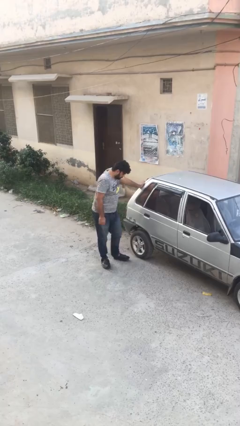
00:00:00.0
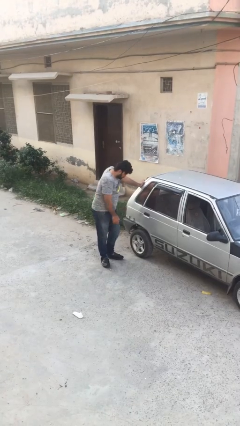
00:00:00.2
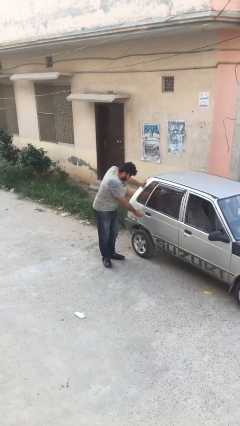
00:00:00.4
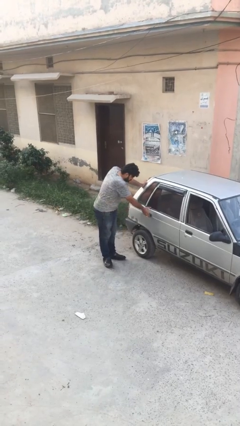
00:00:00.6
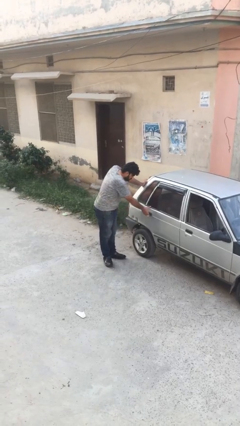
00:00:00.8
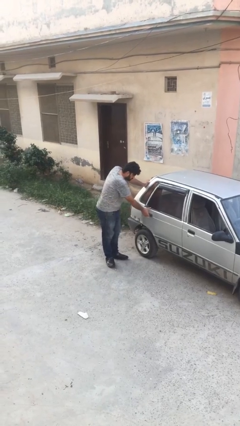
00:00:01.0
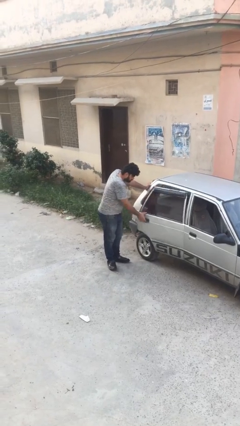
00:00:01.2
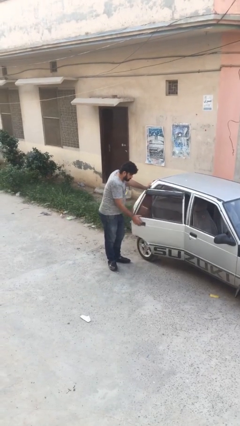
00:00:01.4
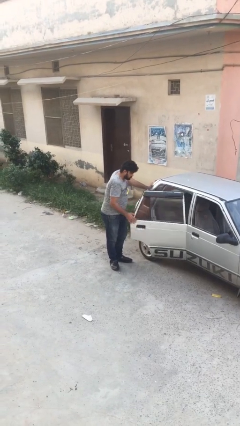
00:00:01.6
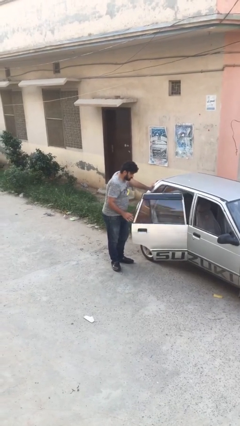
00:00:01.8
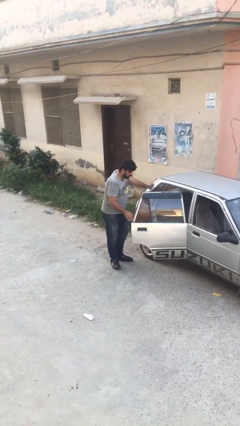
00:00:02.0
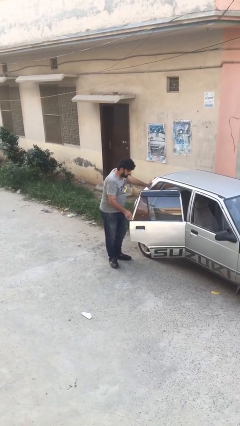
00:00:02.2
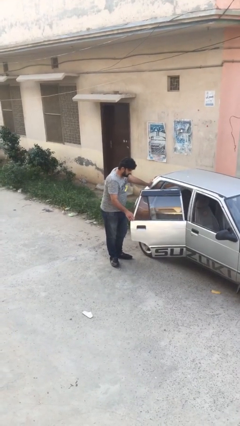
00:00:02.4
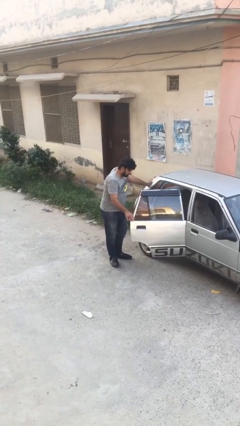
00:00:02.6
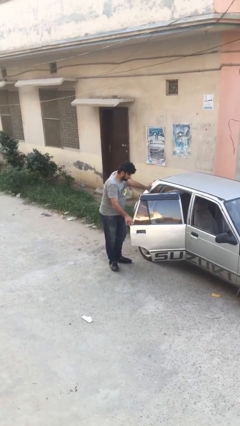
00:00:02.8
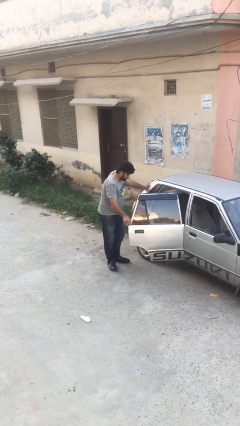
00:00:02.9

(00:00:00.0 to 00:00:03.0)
person opens car door

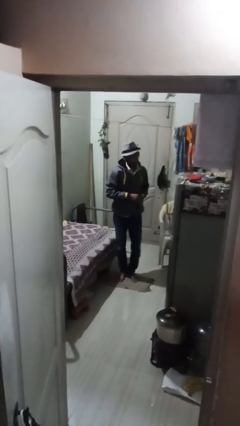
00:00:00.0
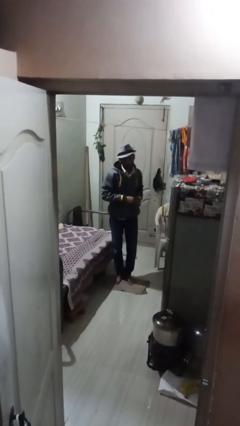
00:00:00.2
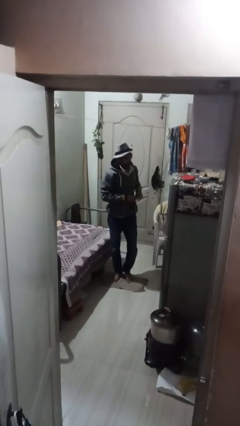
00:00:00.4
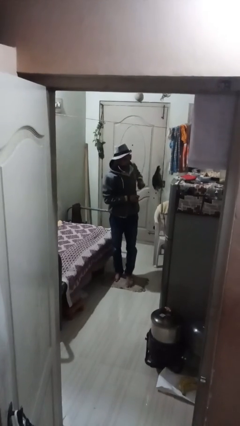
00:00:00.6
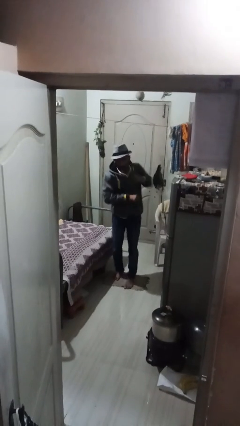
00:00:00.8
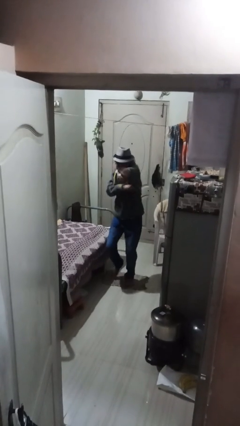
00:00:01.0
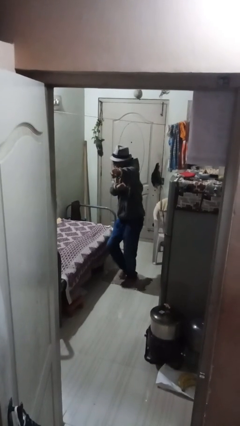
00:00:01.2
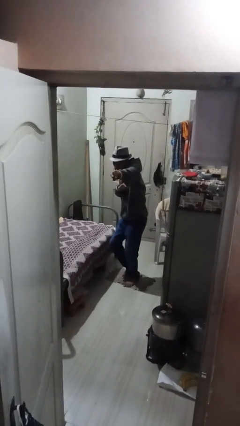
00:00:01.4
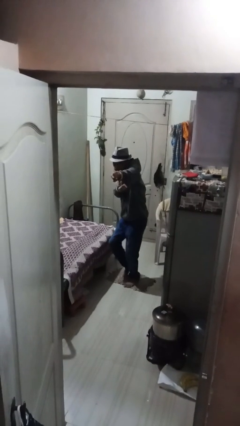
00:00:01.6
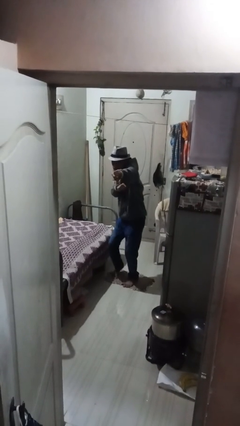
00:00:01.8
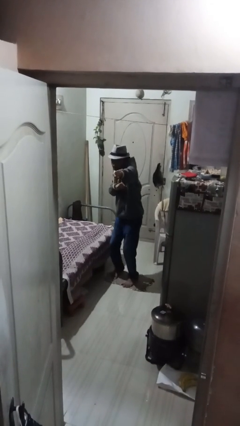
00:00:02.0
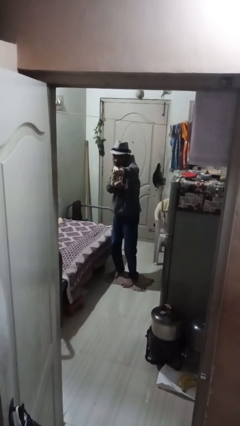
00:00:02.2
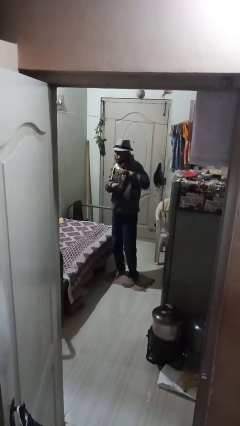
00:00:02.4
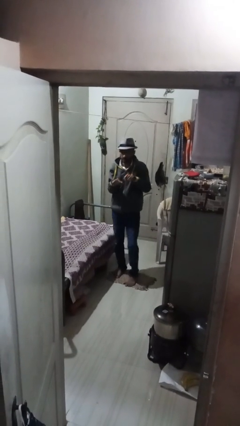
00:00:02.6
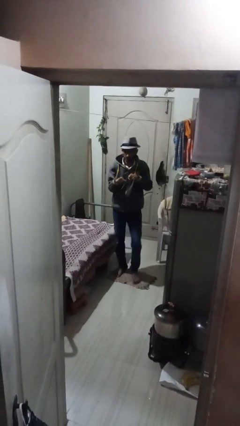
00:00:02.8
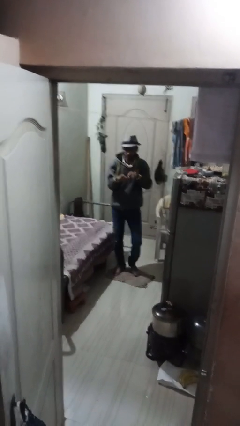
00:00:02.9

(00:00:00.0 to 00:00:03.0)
person punches

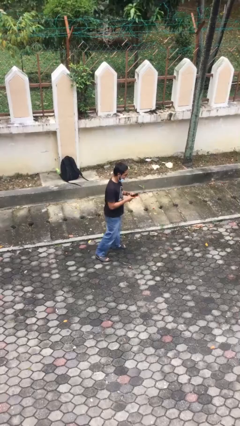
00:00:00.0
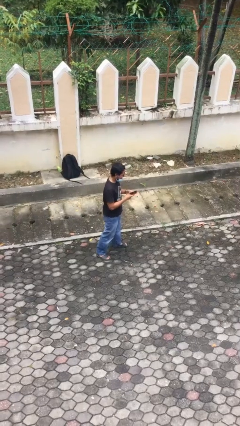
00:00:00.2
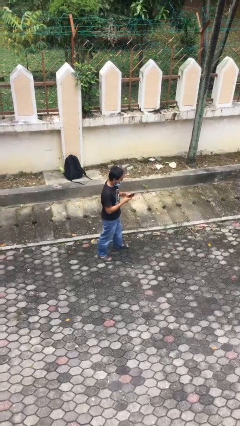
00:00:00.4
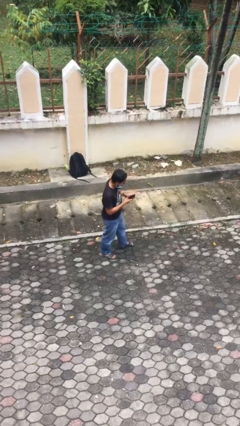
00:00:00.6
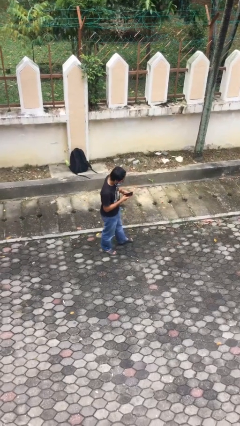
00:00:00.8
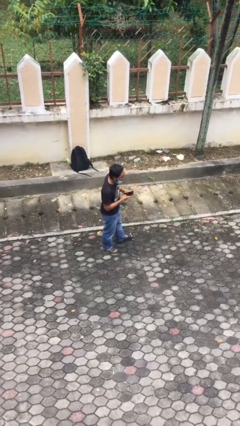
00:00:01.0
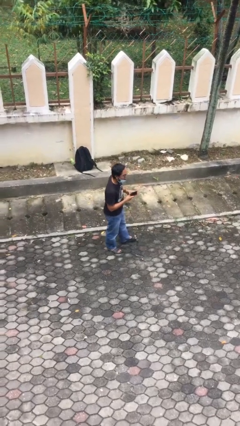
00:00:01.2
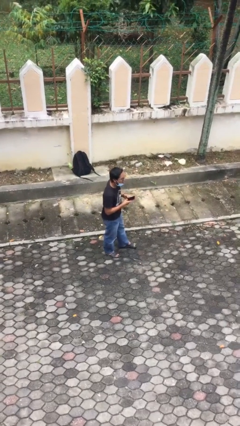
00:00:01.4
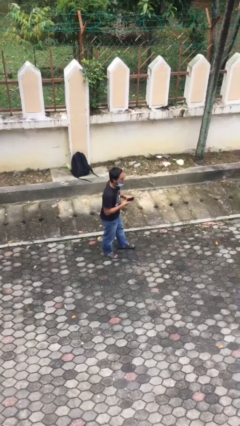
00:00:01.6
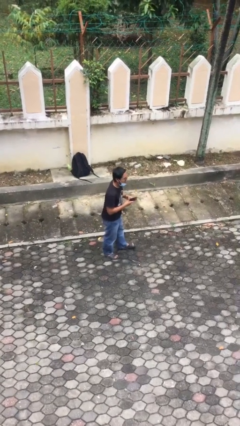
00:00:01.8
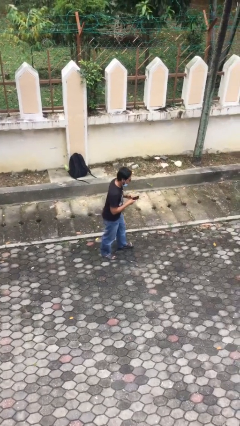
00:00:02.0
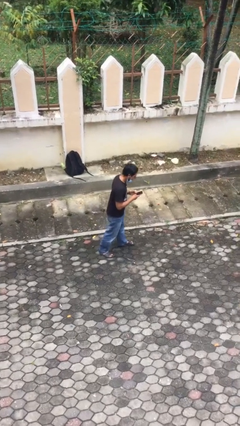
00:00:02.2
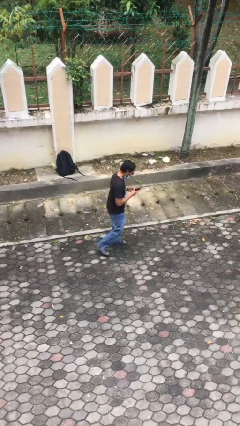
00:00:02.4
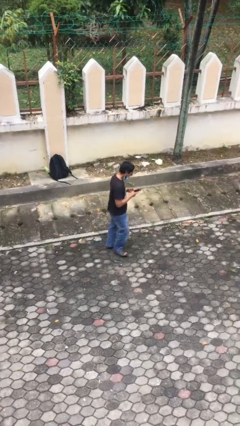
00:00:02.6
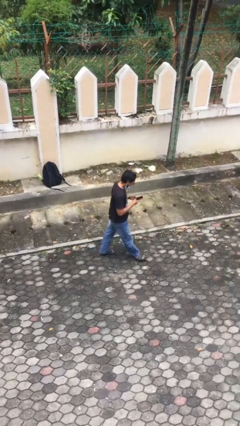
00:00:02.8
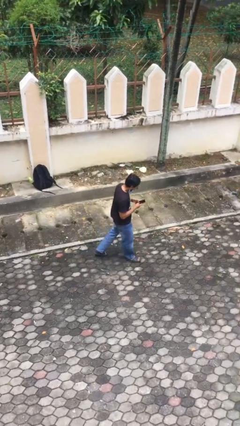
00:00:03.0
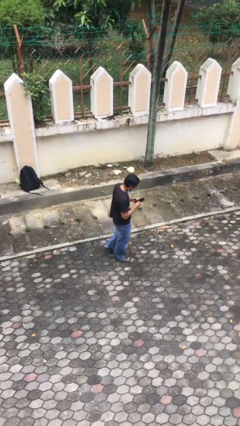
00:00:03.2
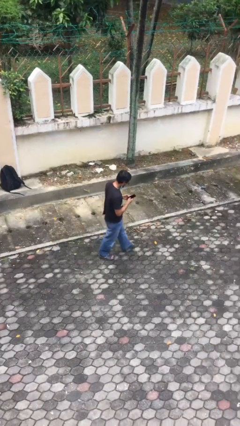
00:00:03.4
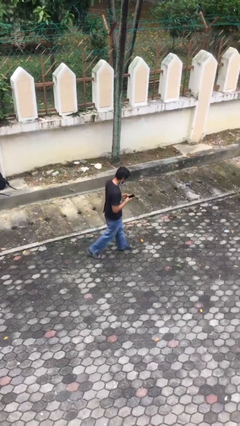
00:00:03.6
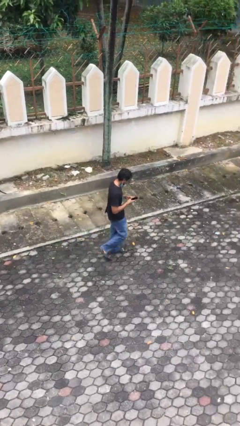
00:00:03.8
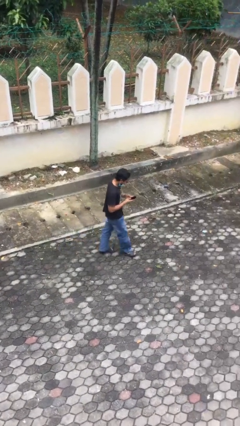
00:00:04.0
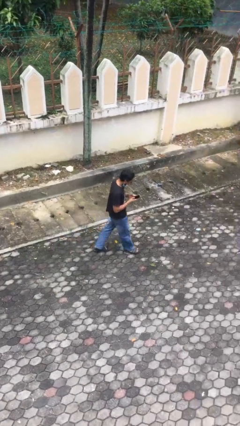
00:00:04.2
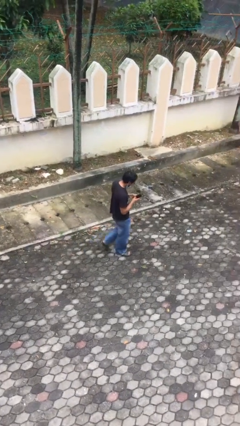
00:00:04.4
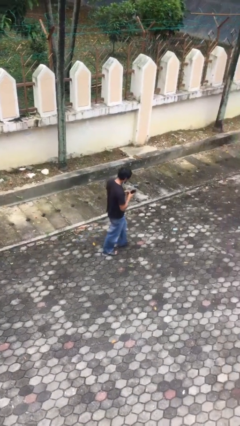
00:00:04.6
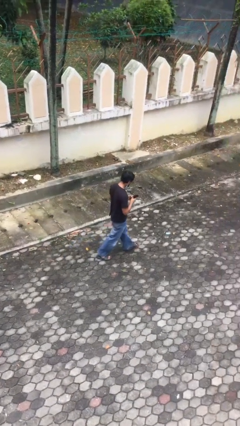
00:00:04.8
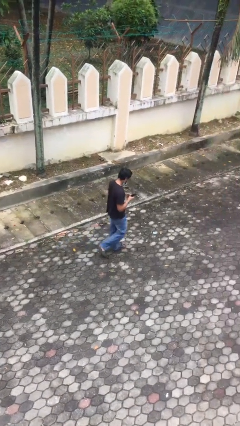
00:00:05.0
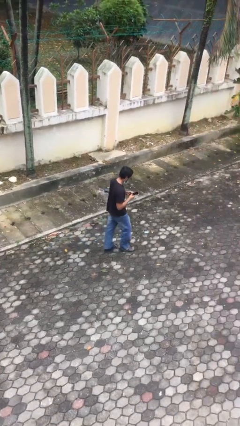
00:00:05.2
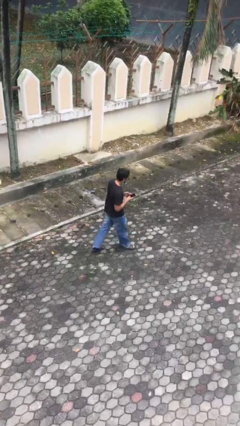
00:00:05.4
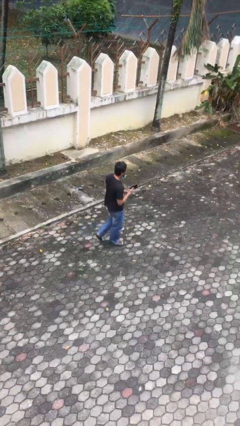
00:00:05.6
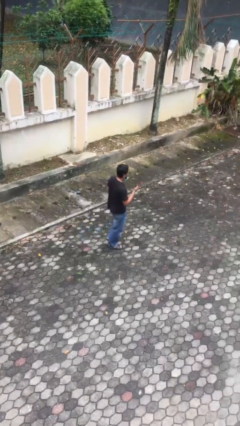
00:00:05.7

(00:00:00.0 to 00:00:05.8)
person texts on phone

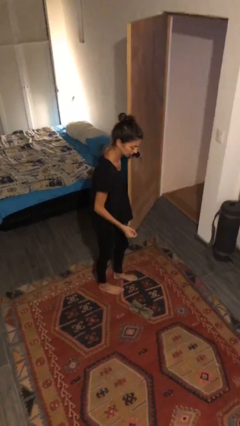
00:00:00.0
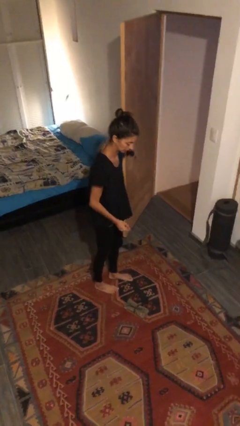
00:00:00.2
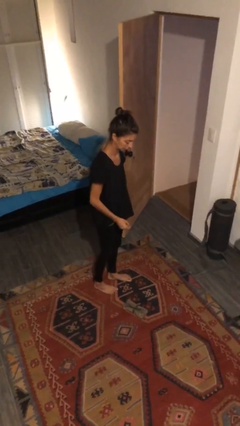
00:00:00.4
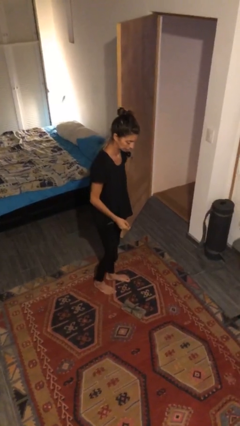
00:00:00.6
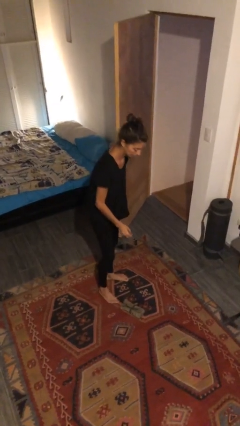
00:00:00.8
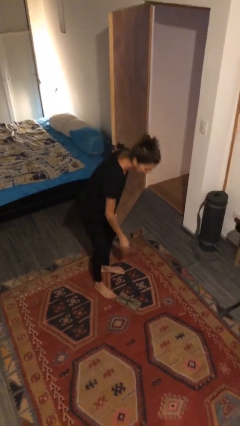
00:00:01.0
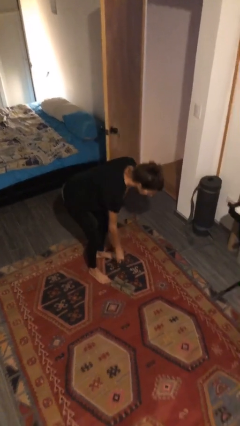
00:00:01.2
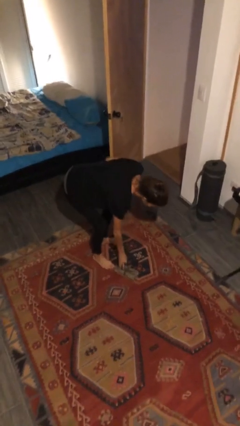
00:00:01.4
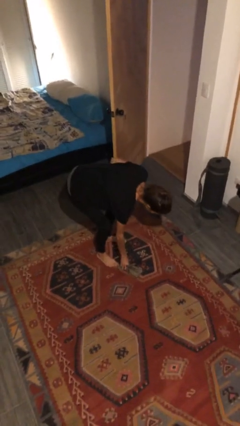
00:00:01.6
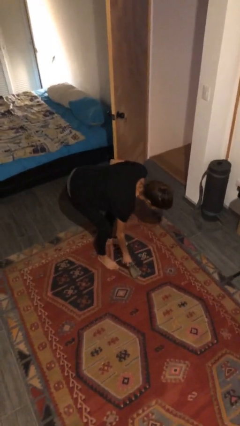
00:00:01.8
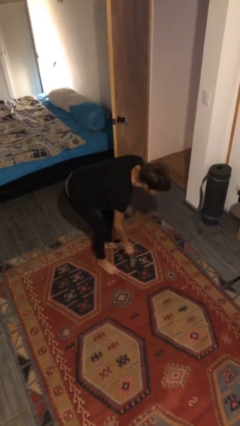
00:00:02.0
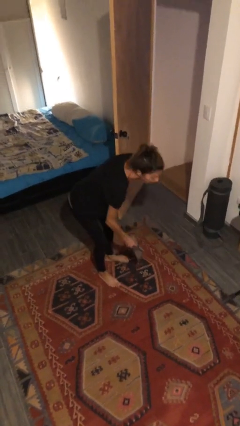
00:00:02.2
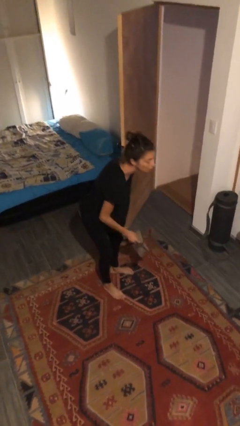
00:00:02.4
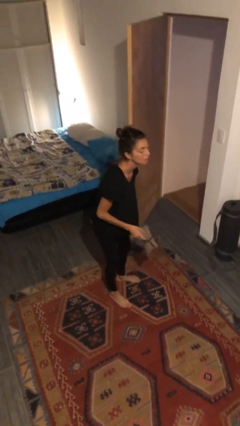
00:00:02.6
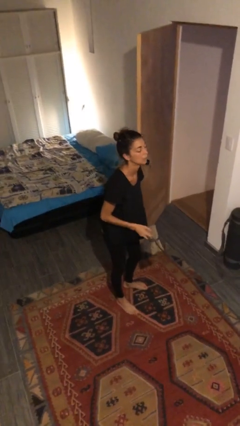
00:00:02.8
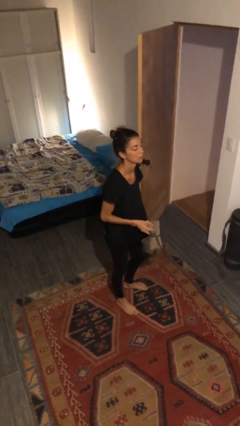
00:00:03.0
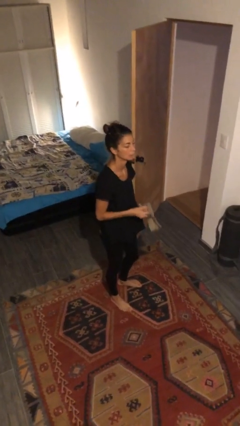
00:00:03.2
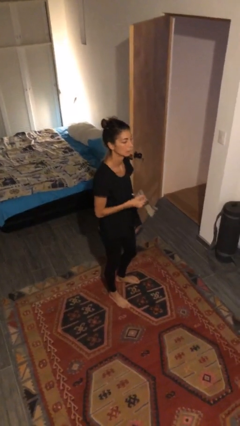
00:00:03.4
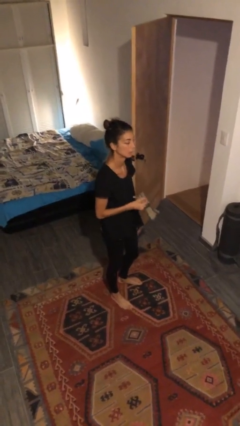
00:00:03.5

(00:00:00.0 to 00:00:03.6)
person picks up object from floor

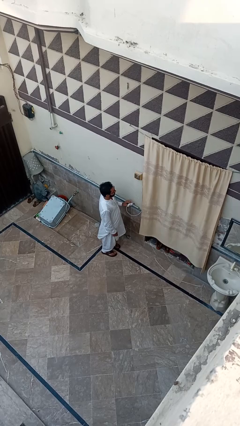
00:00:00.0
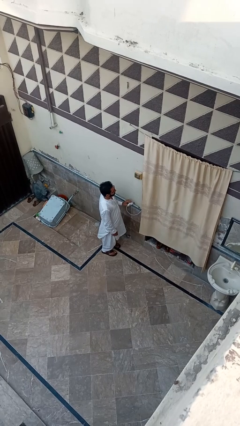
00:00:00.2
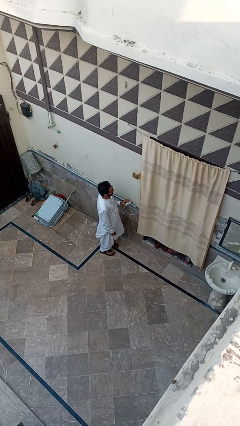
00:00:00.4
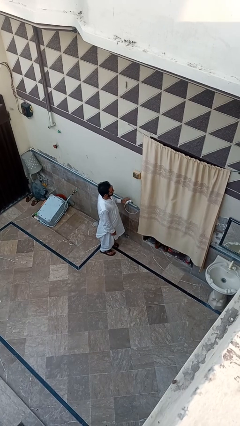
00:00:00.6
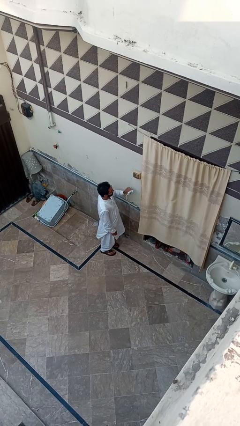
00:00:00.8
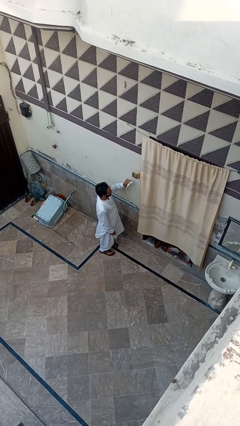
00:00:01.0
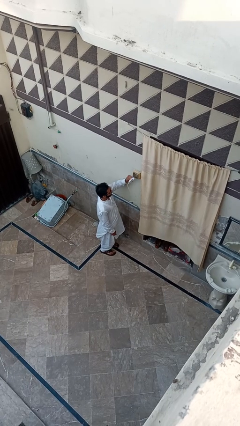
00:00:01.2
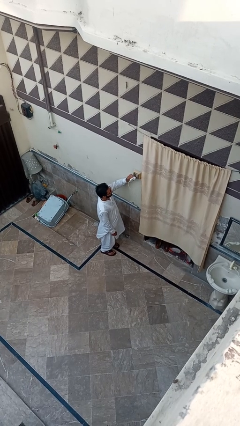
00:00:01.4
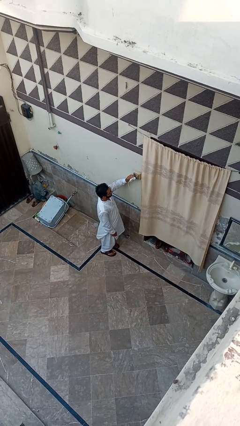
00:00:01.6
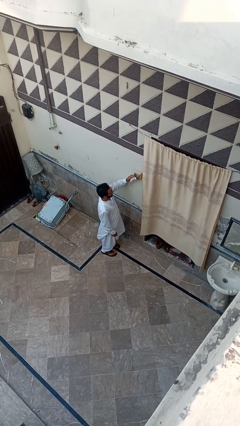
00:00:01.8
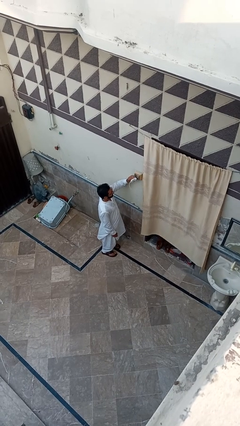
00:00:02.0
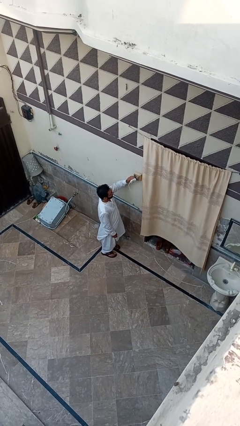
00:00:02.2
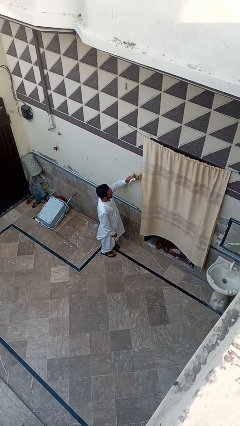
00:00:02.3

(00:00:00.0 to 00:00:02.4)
person plugs into electrical socket
